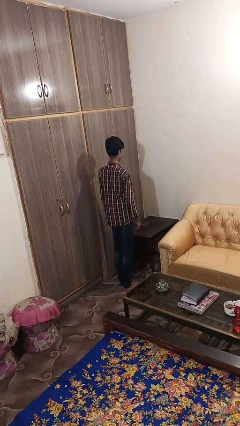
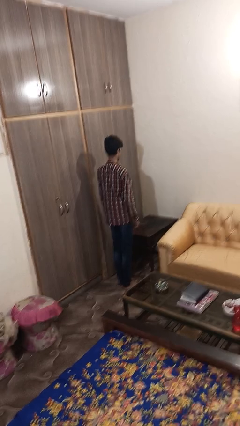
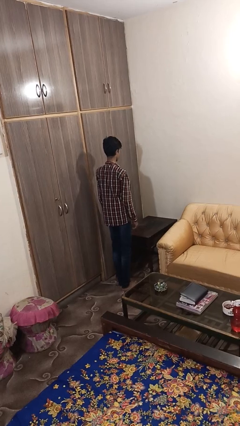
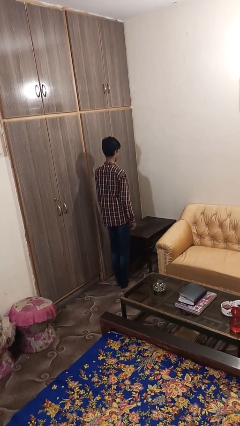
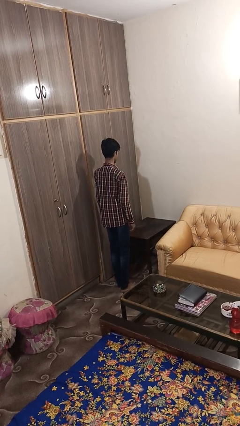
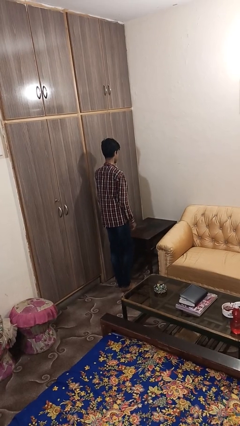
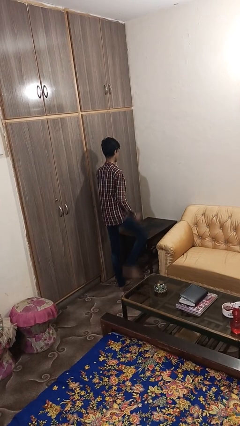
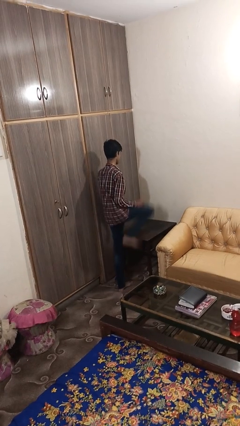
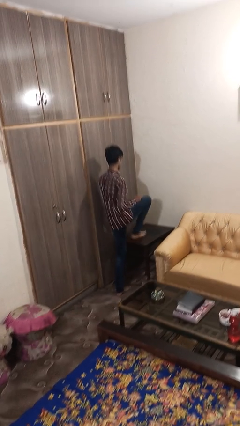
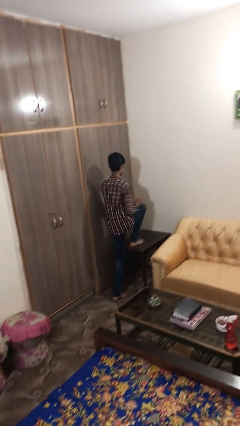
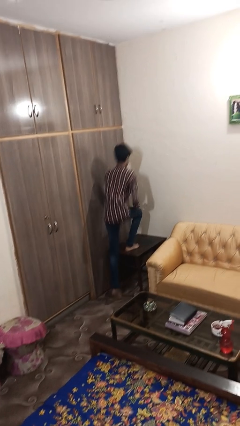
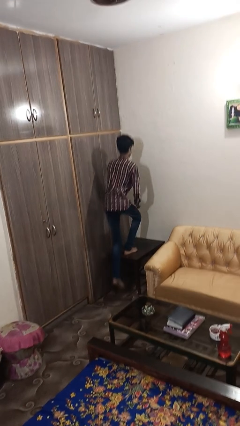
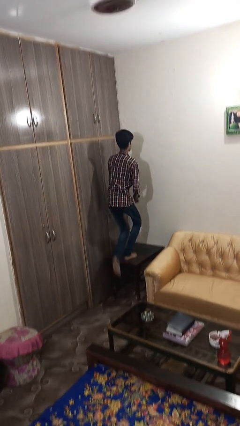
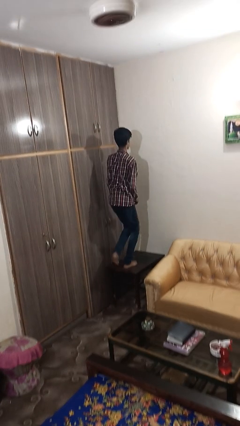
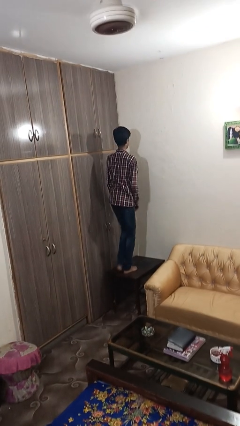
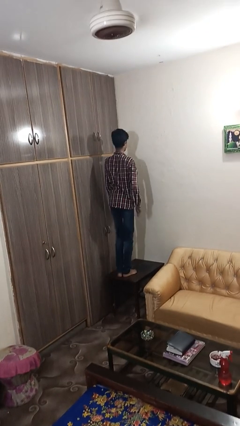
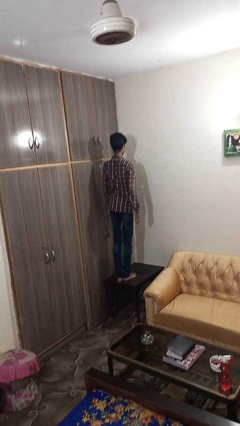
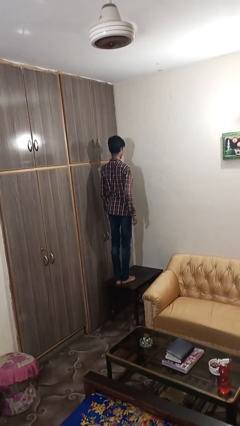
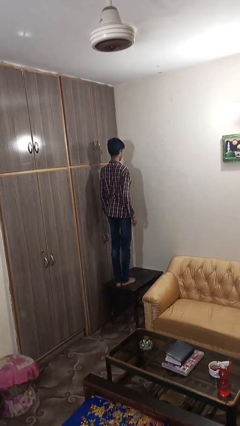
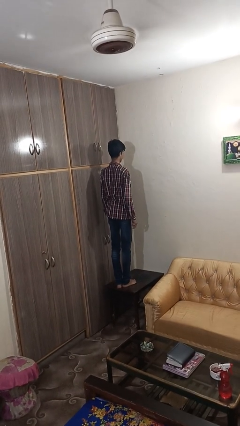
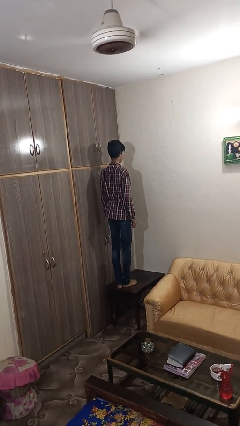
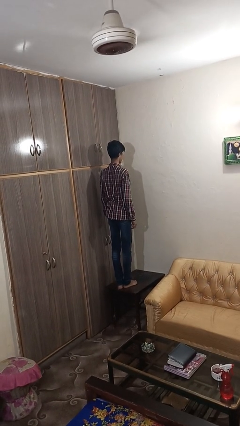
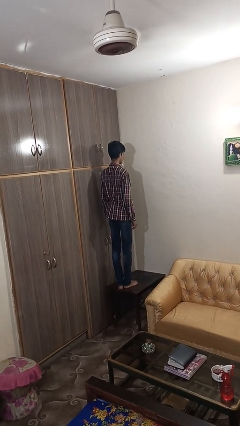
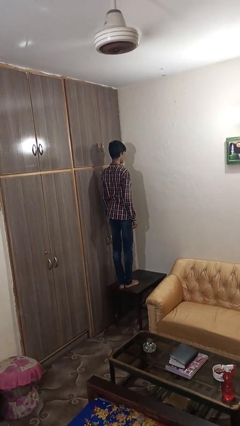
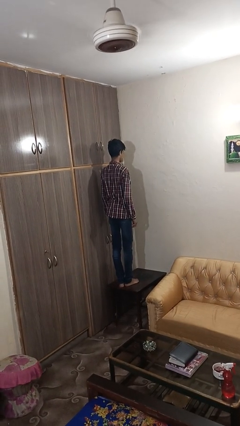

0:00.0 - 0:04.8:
person climbs on table

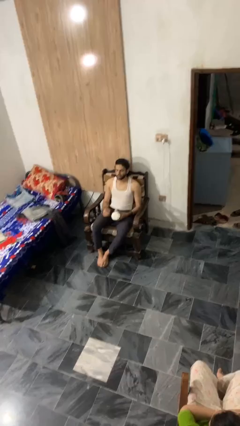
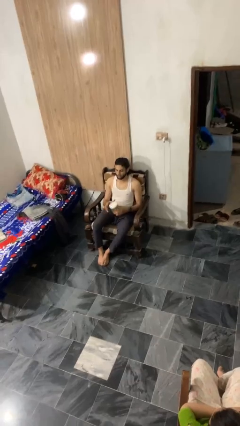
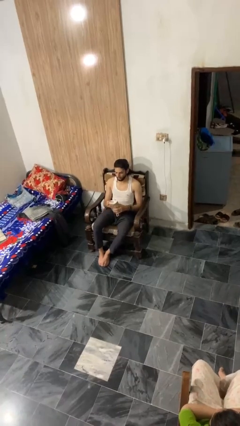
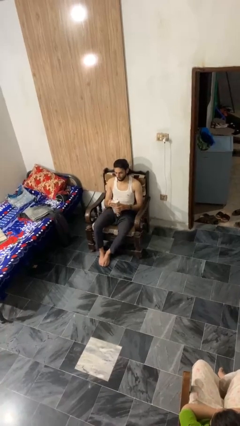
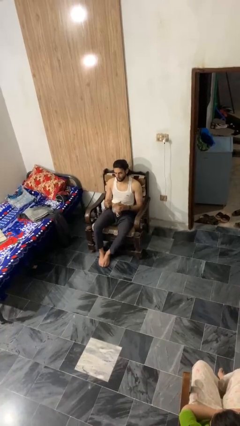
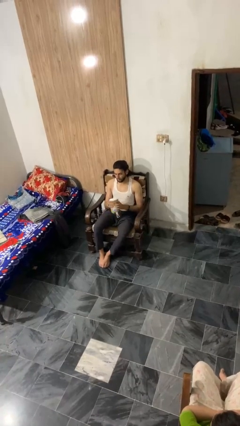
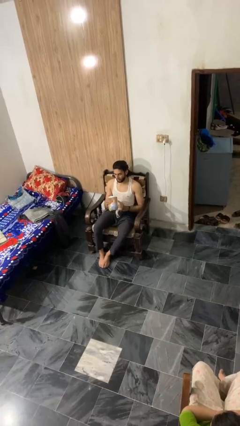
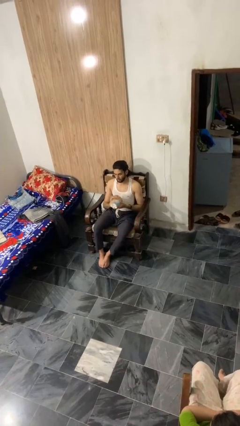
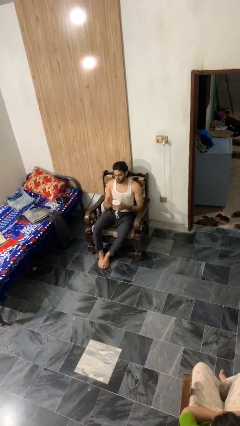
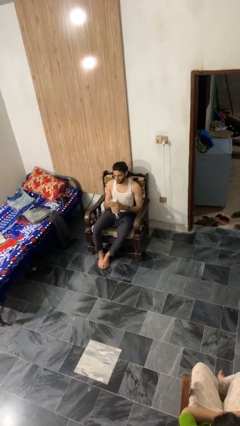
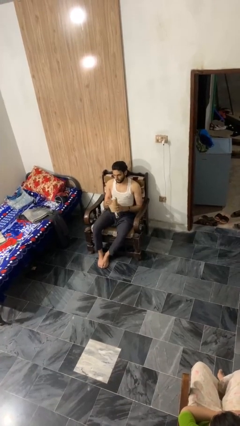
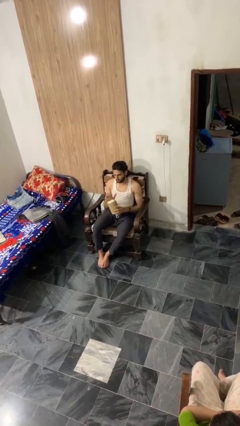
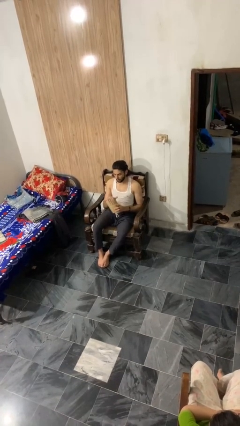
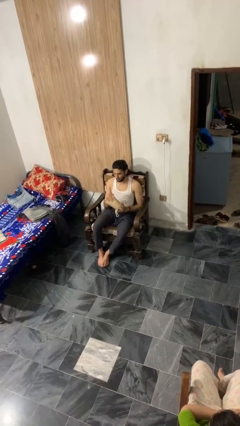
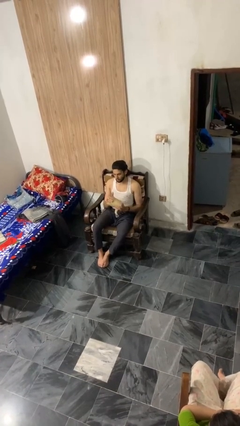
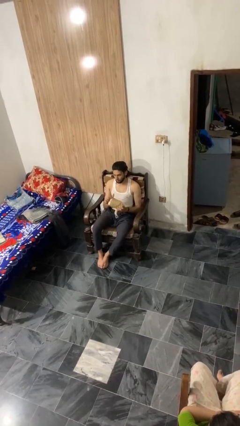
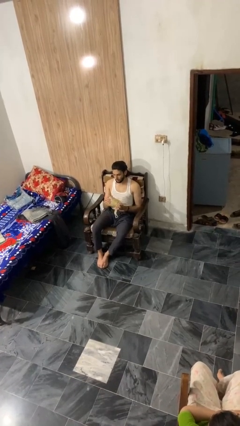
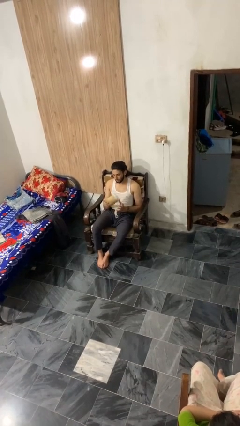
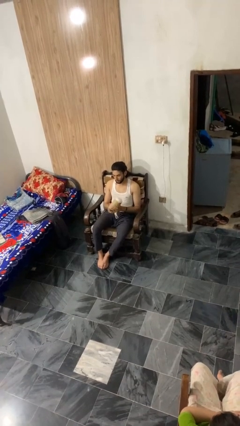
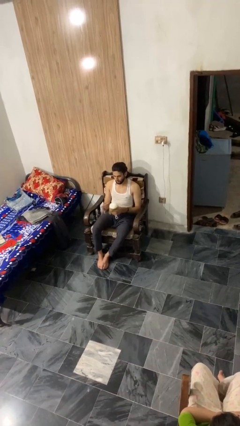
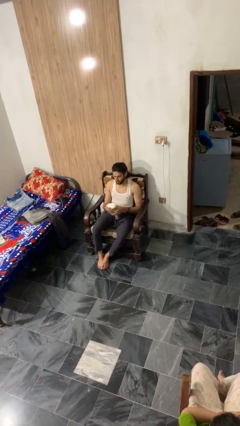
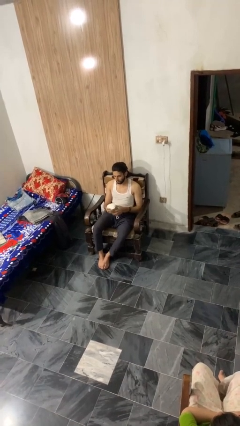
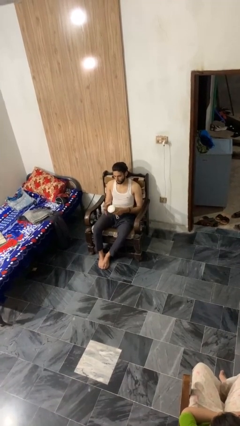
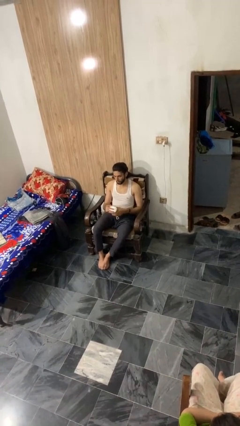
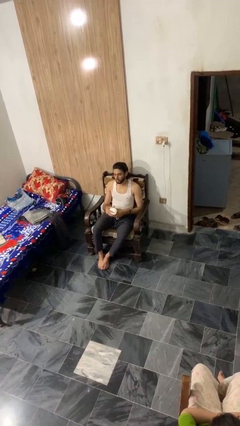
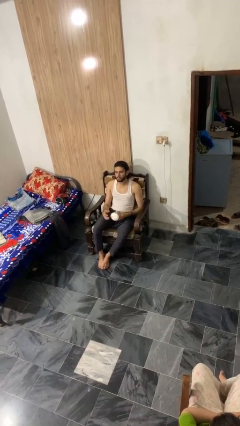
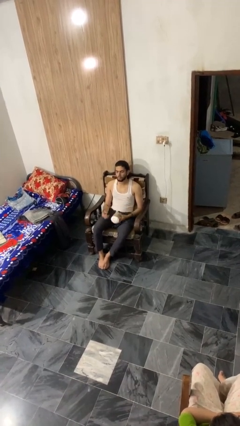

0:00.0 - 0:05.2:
person squeezes object

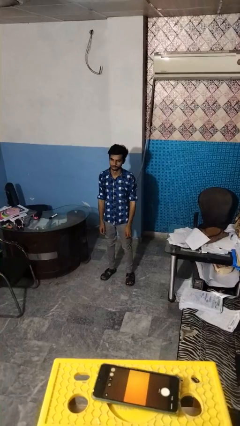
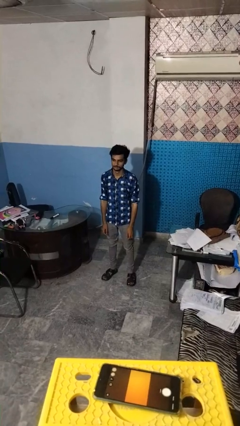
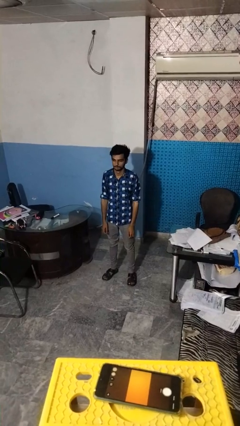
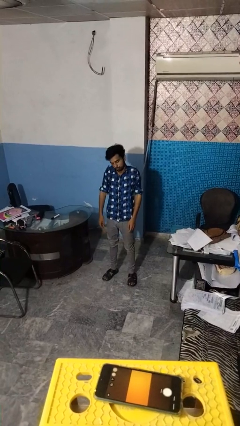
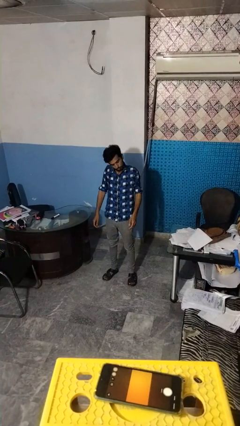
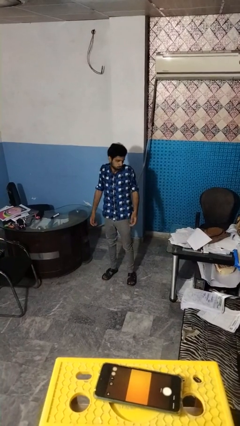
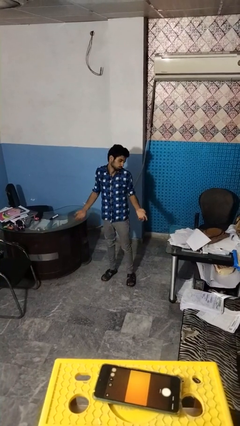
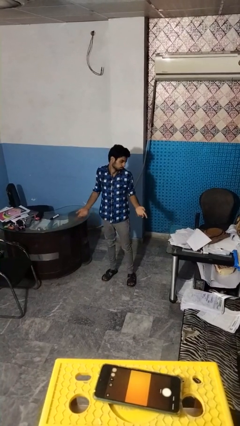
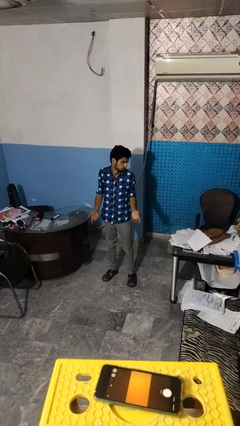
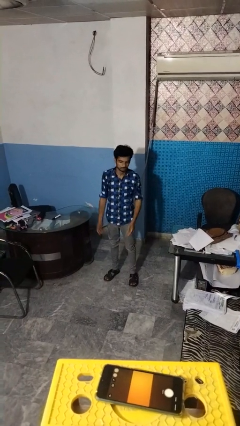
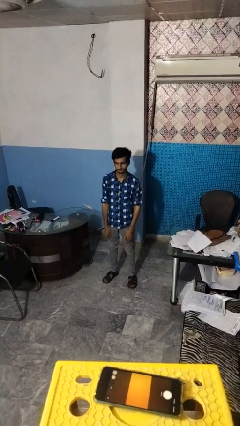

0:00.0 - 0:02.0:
person shrugs

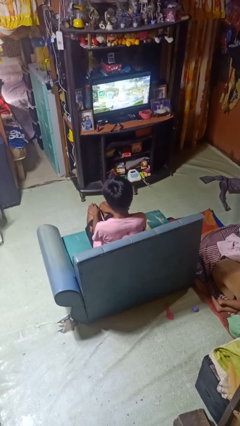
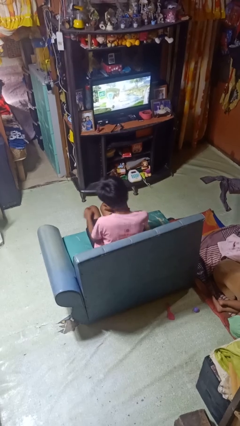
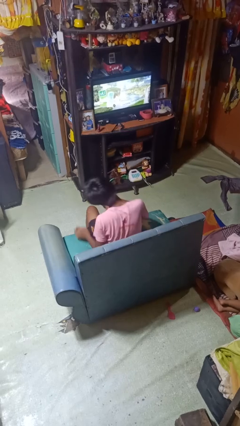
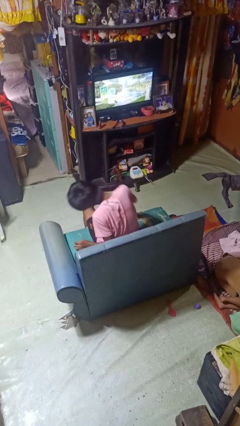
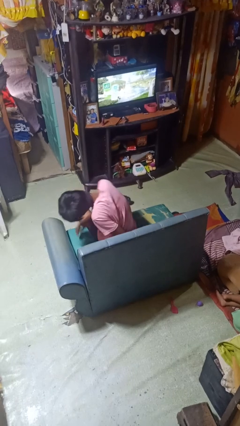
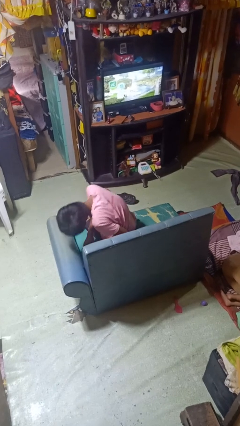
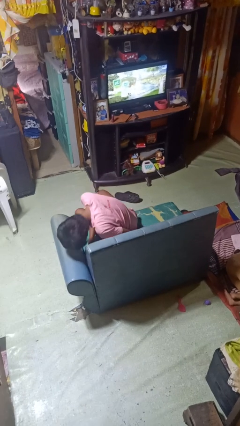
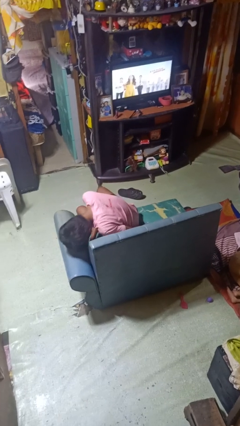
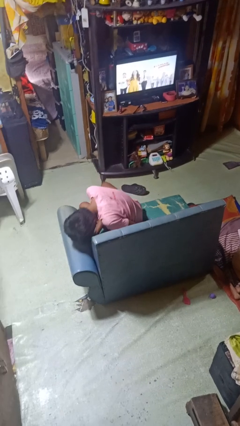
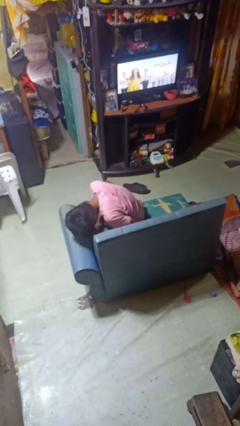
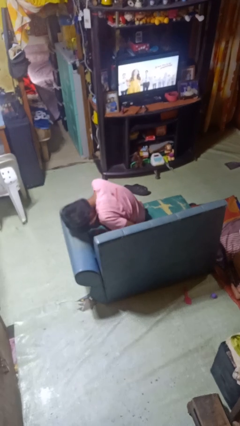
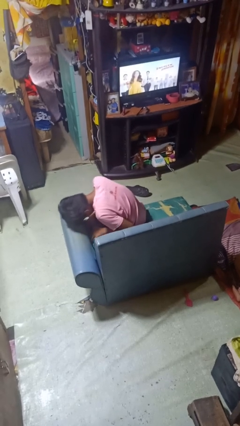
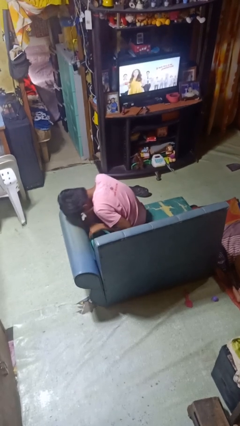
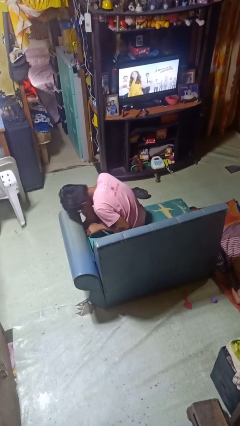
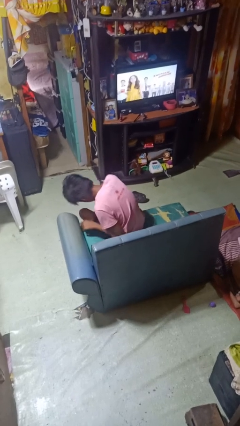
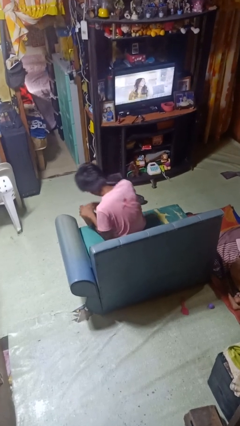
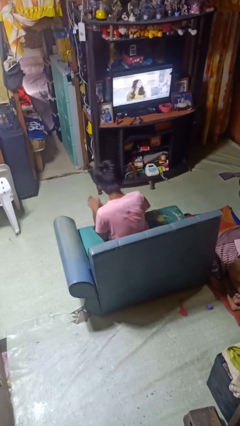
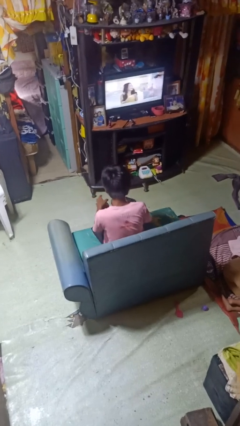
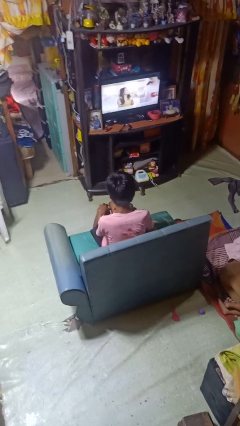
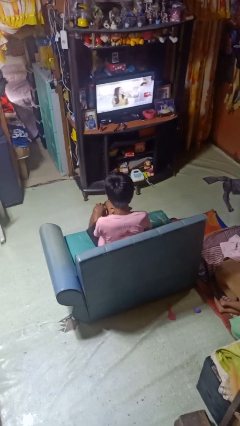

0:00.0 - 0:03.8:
person searches in couch

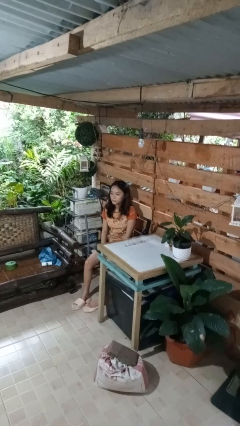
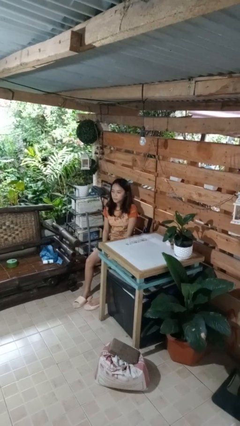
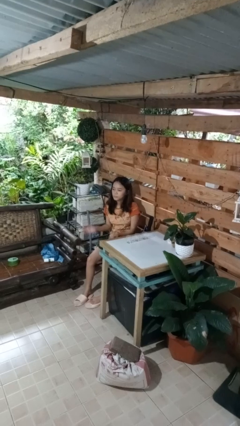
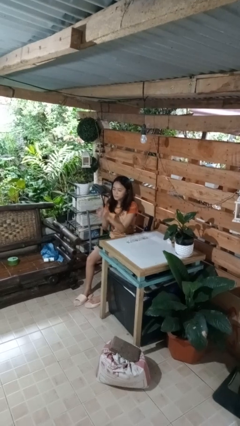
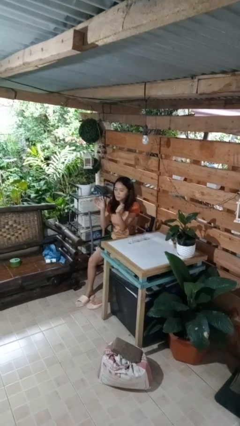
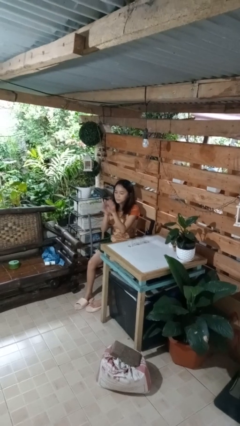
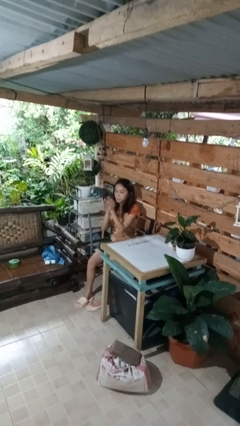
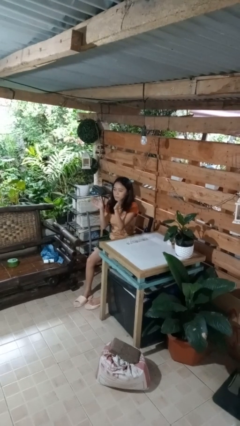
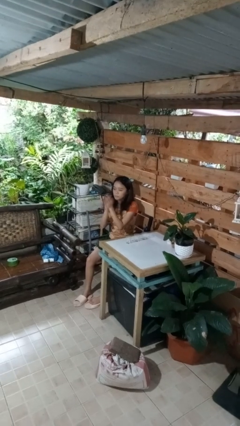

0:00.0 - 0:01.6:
person claps hands

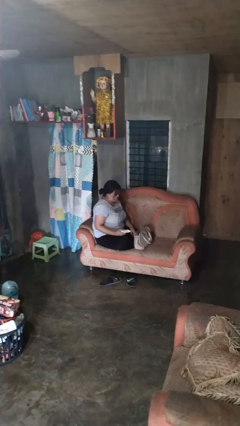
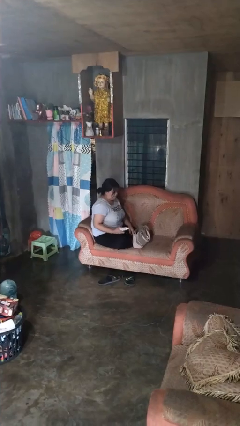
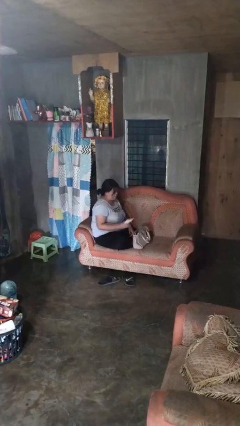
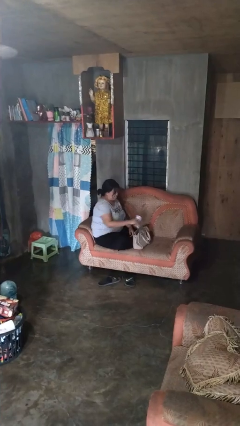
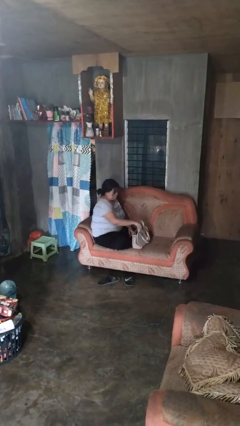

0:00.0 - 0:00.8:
person puts object into purse
